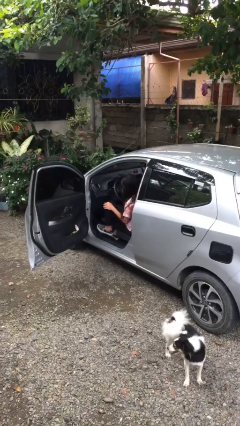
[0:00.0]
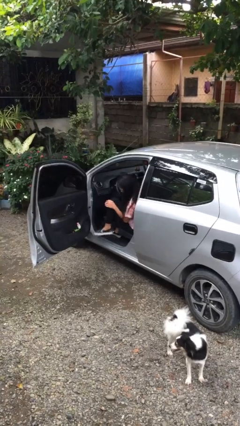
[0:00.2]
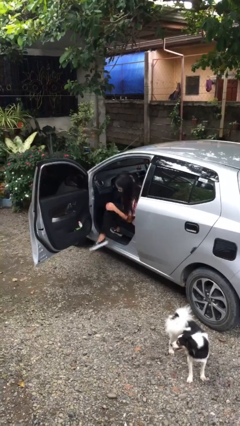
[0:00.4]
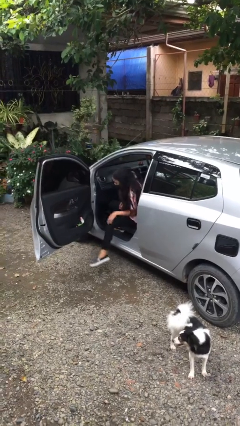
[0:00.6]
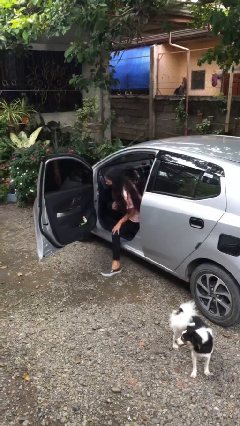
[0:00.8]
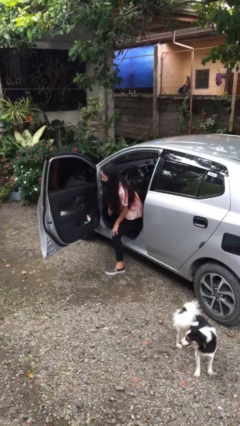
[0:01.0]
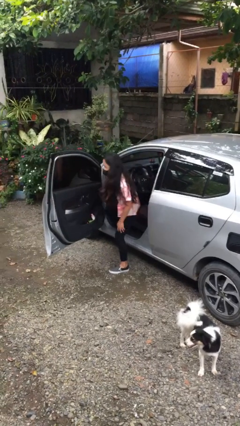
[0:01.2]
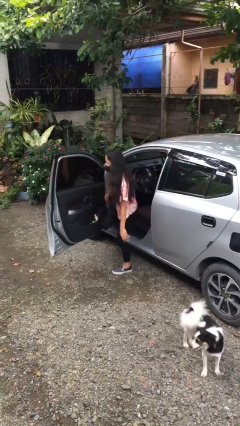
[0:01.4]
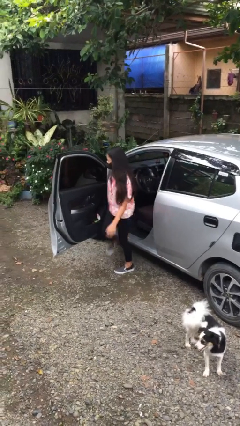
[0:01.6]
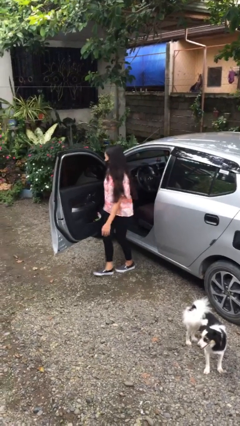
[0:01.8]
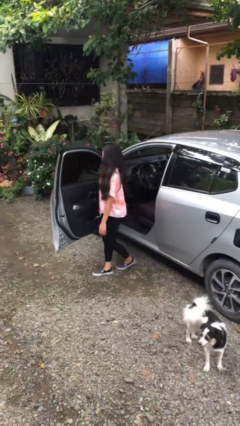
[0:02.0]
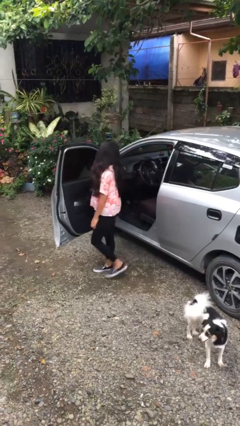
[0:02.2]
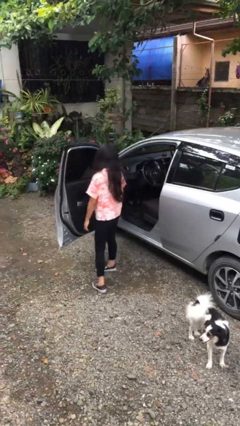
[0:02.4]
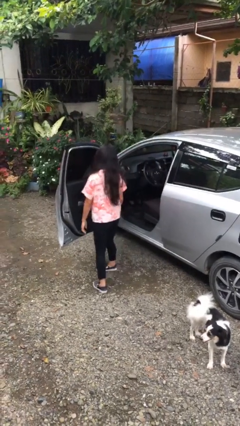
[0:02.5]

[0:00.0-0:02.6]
person exits car

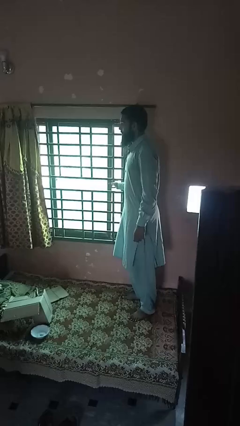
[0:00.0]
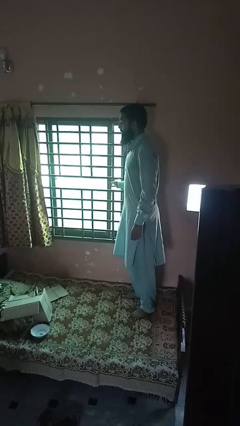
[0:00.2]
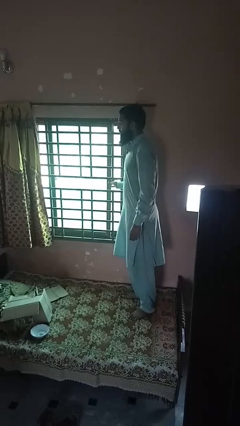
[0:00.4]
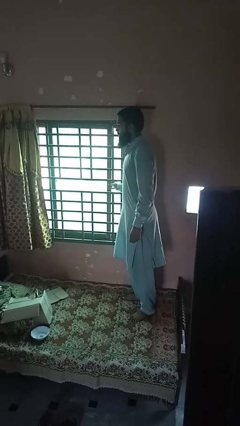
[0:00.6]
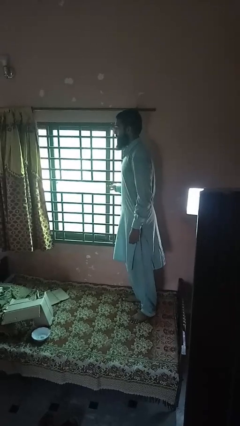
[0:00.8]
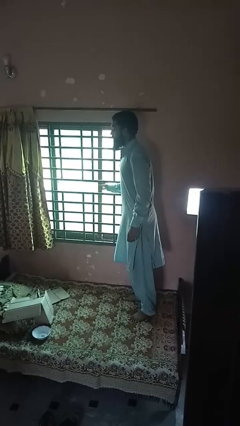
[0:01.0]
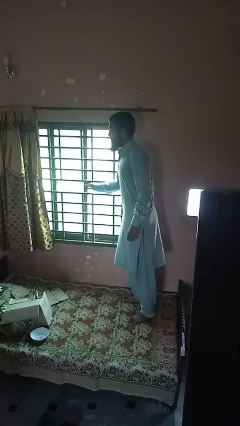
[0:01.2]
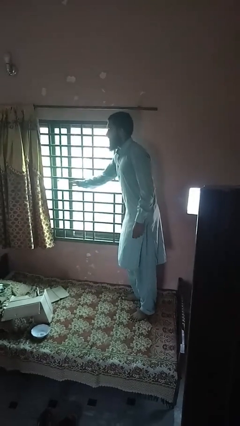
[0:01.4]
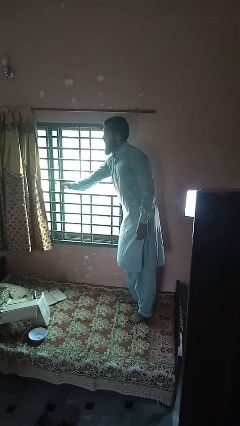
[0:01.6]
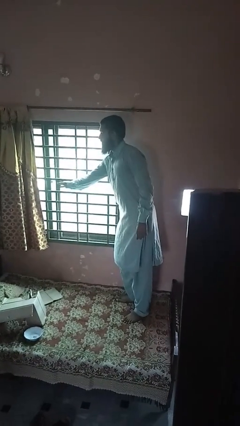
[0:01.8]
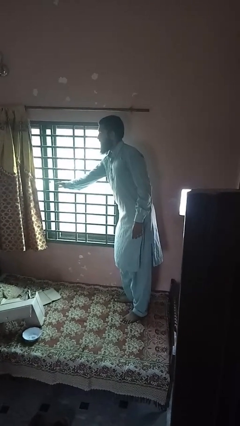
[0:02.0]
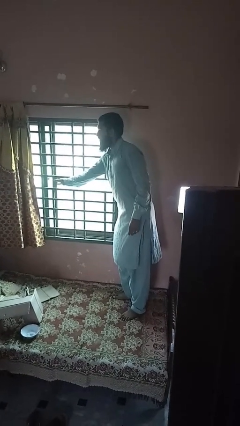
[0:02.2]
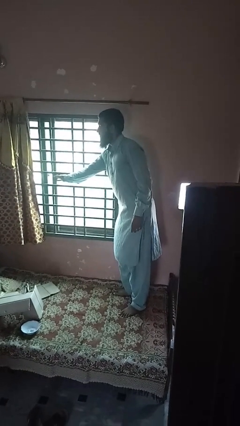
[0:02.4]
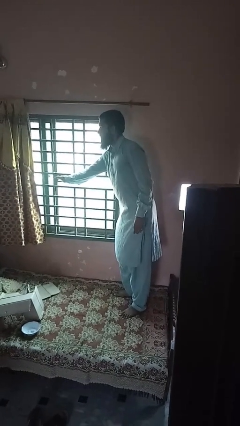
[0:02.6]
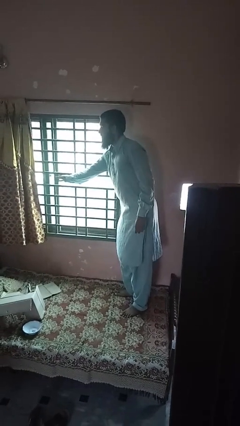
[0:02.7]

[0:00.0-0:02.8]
person opens home window

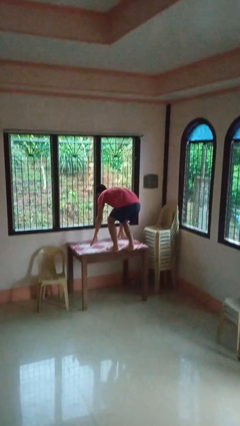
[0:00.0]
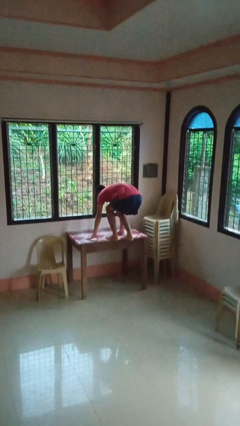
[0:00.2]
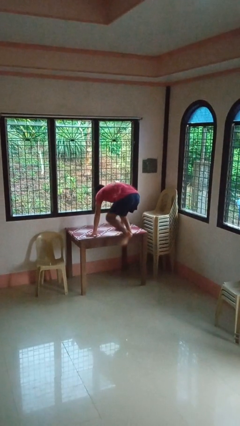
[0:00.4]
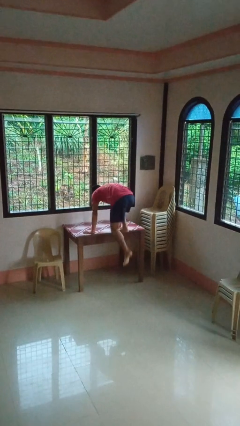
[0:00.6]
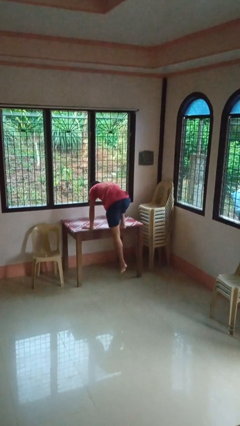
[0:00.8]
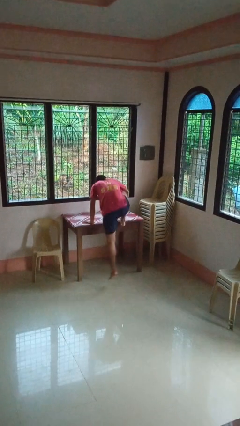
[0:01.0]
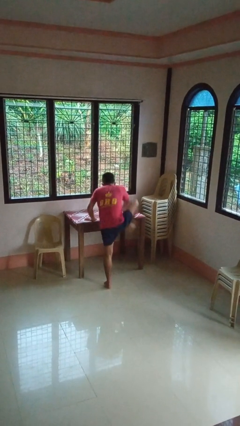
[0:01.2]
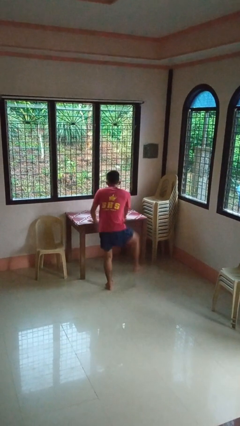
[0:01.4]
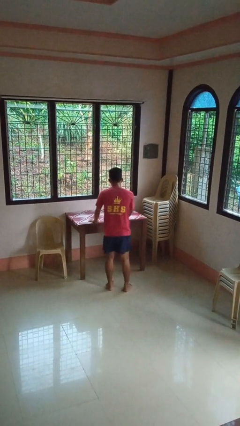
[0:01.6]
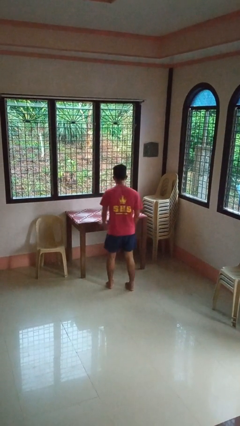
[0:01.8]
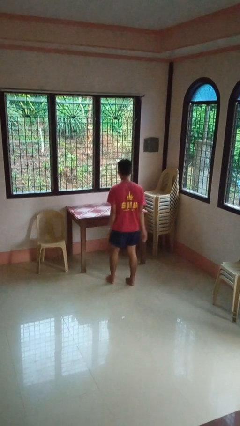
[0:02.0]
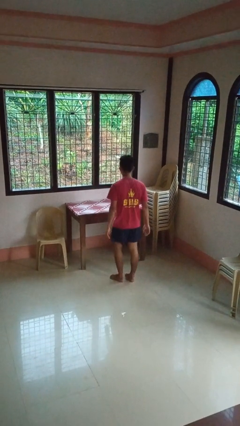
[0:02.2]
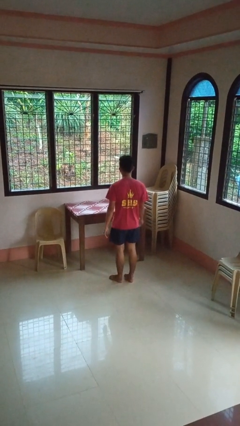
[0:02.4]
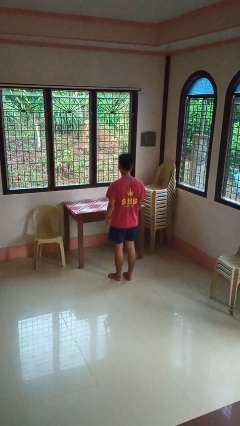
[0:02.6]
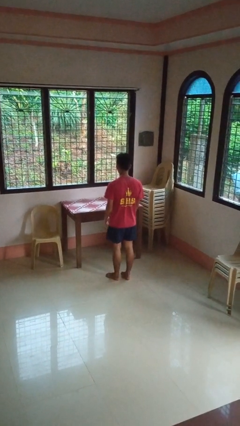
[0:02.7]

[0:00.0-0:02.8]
person climbs off table

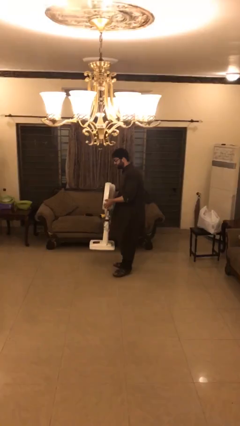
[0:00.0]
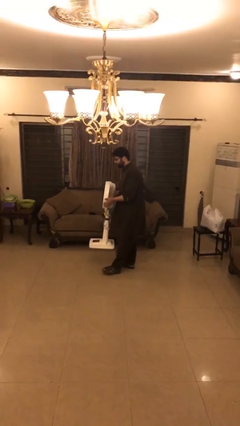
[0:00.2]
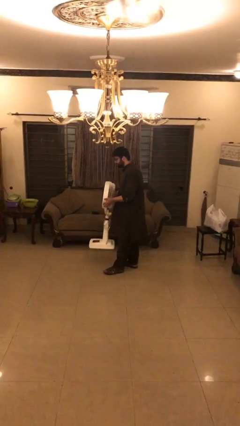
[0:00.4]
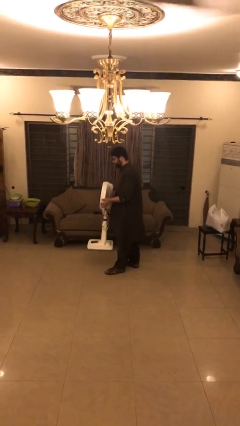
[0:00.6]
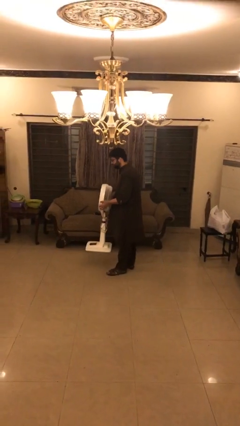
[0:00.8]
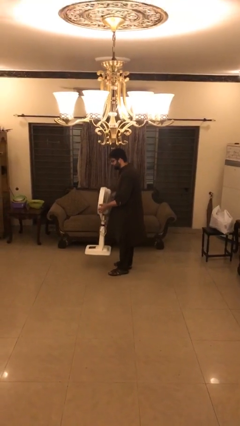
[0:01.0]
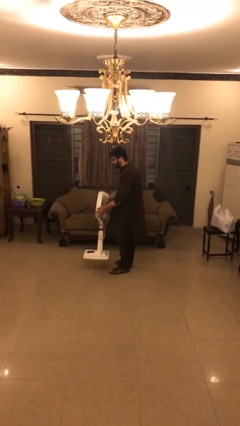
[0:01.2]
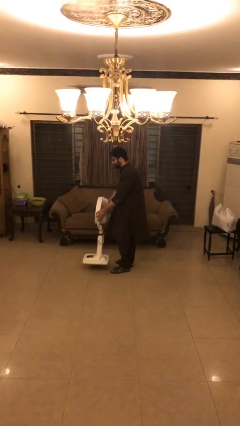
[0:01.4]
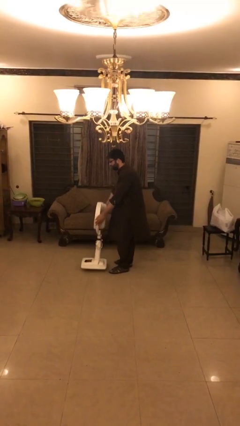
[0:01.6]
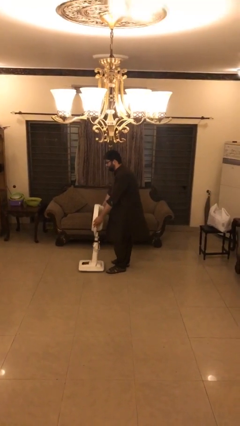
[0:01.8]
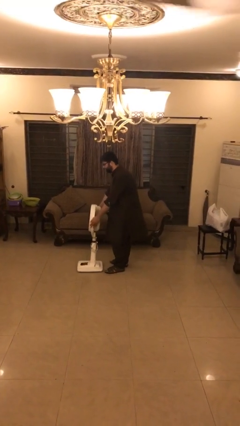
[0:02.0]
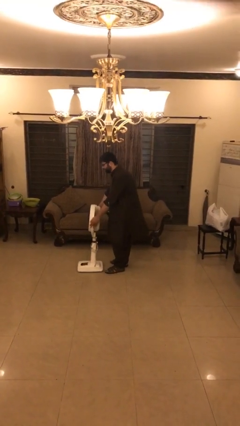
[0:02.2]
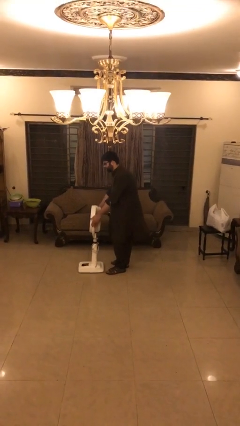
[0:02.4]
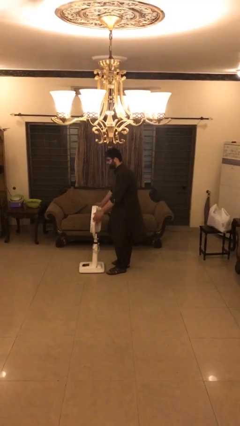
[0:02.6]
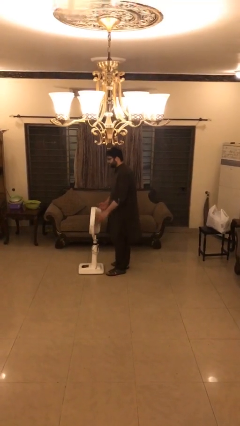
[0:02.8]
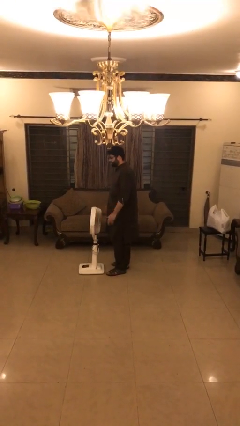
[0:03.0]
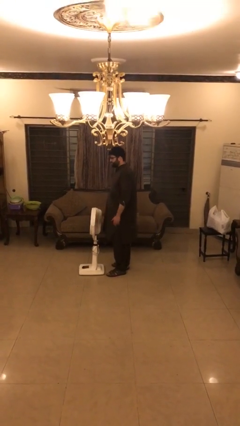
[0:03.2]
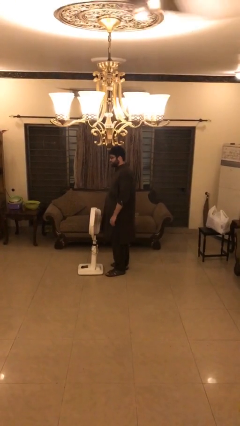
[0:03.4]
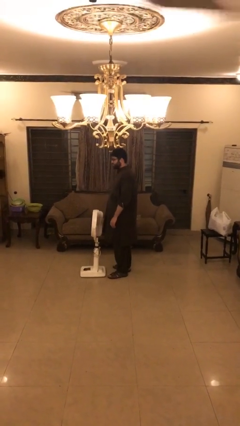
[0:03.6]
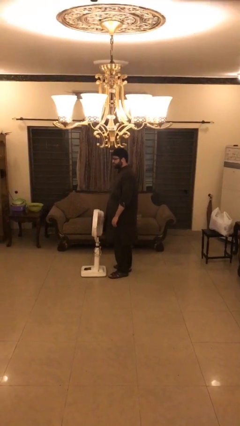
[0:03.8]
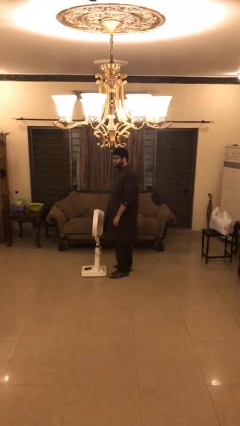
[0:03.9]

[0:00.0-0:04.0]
person puts down object on floor

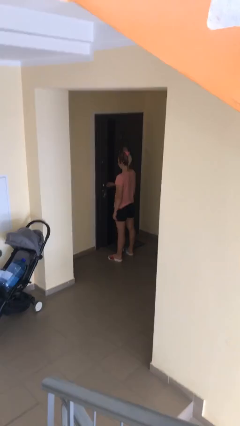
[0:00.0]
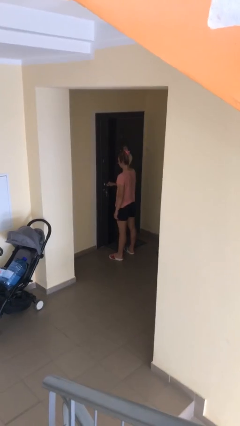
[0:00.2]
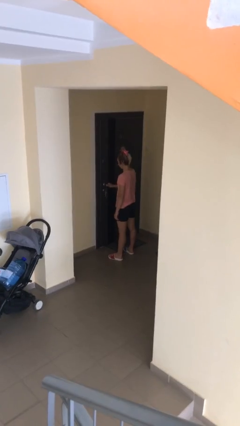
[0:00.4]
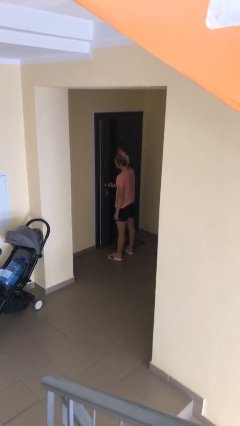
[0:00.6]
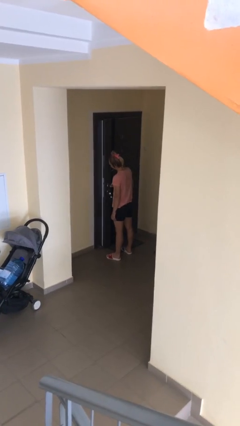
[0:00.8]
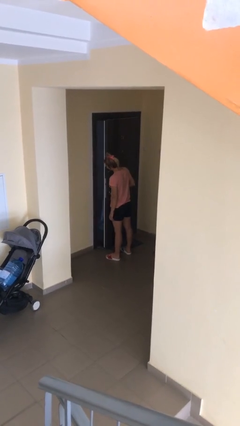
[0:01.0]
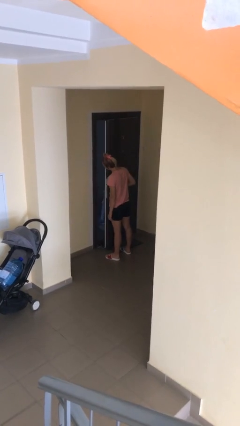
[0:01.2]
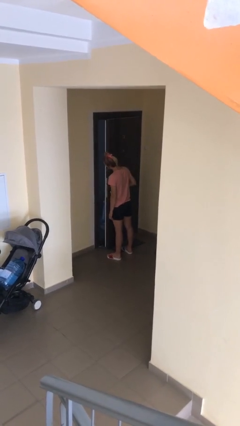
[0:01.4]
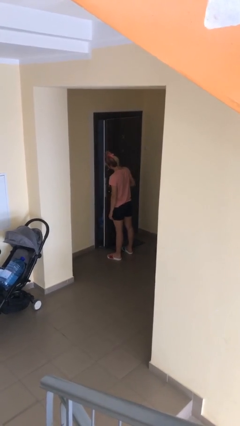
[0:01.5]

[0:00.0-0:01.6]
person opens facility door

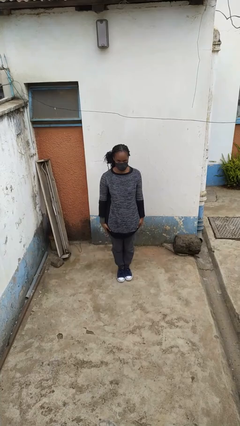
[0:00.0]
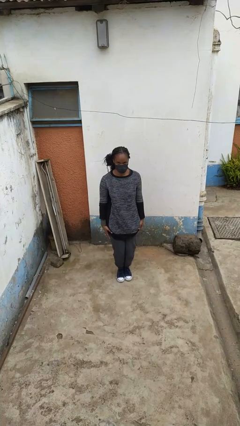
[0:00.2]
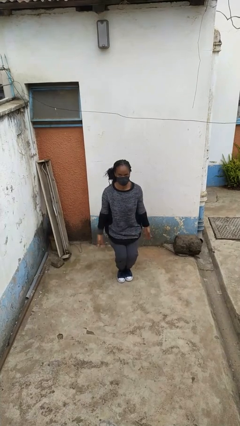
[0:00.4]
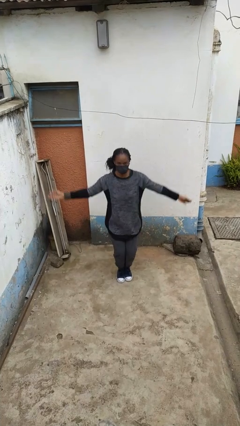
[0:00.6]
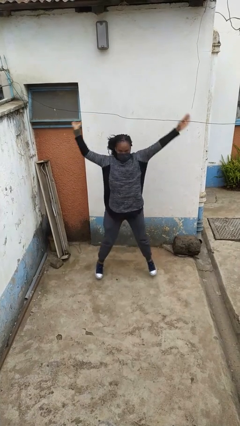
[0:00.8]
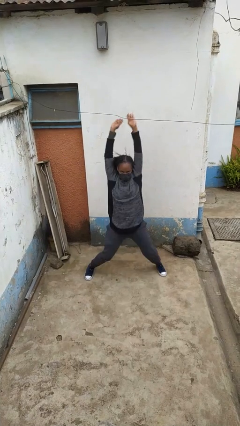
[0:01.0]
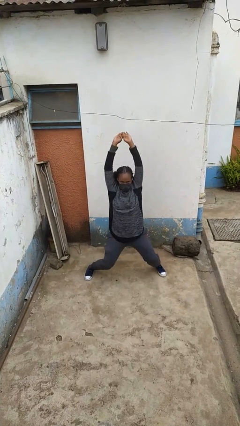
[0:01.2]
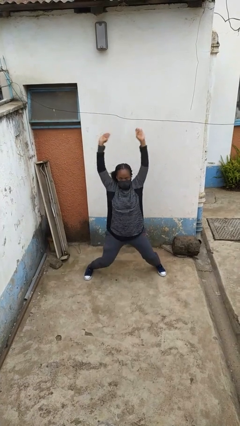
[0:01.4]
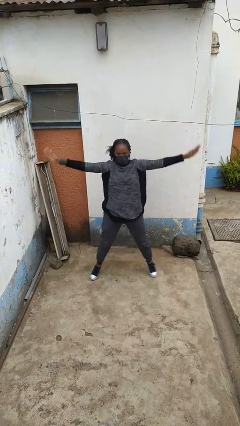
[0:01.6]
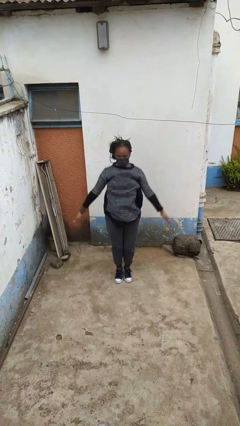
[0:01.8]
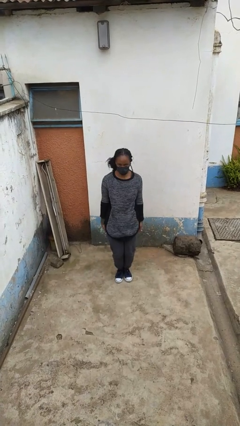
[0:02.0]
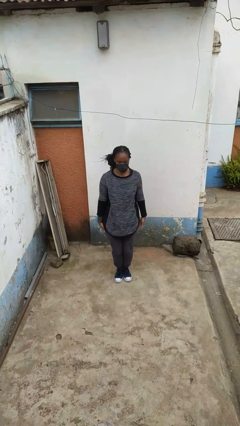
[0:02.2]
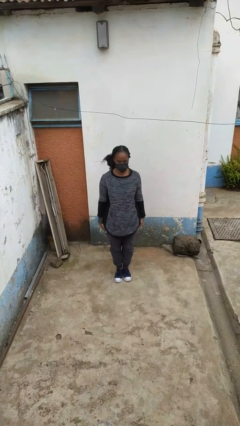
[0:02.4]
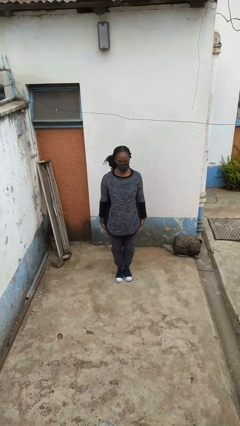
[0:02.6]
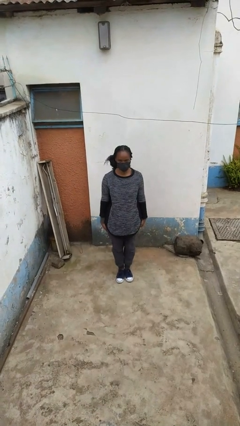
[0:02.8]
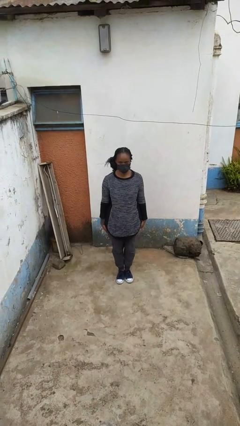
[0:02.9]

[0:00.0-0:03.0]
person exercises with jumping jacks

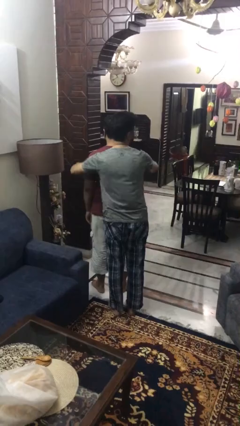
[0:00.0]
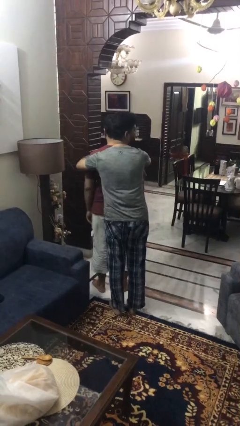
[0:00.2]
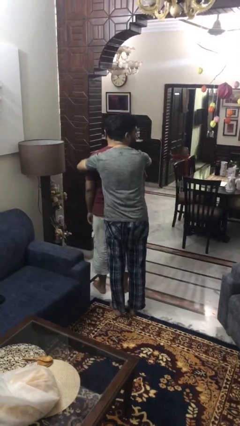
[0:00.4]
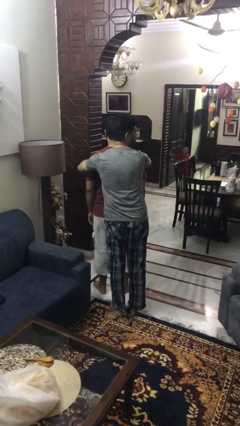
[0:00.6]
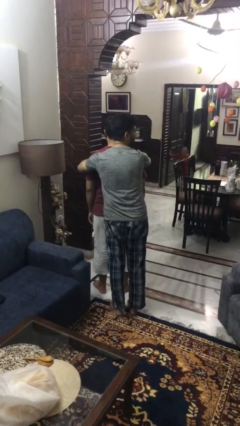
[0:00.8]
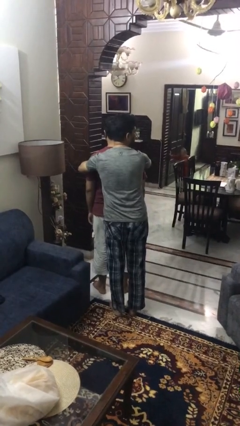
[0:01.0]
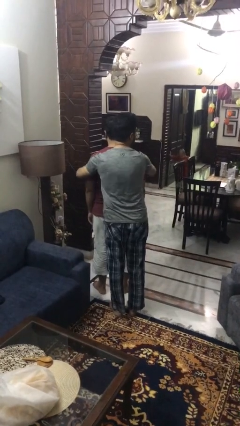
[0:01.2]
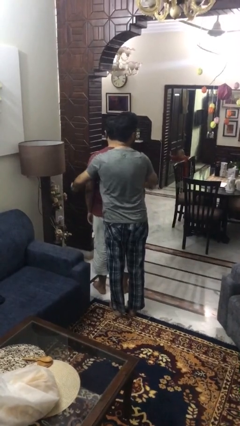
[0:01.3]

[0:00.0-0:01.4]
person hugs person from behind
